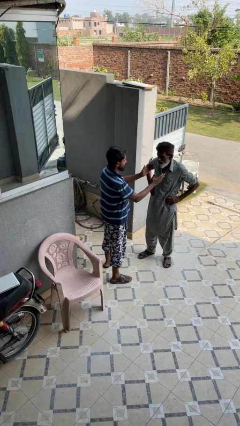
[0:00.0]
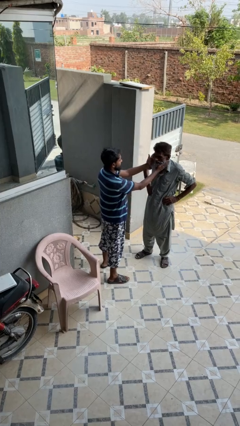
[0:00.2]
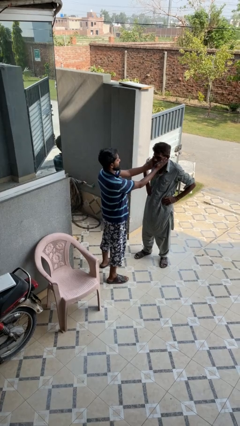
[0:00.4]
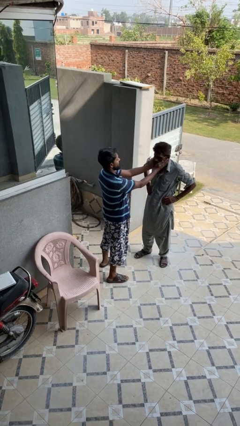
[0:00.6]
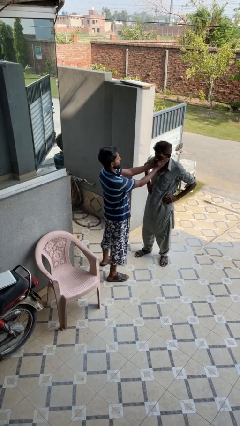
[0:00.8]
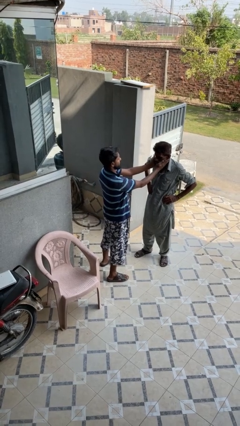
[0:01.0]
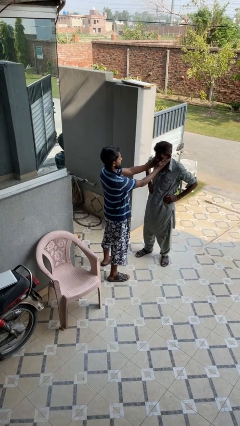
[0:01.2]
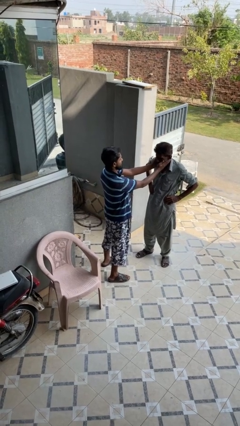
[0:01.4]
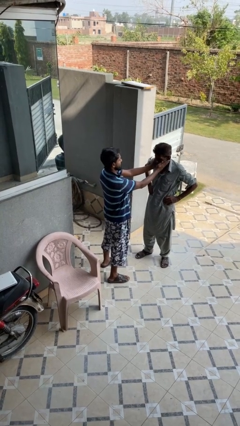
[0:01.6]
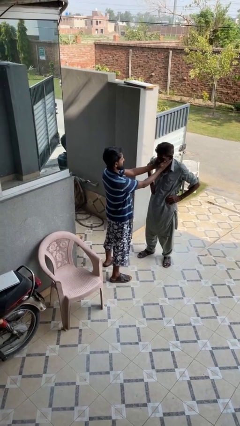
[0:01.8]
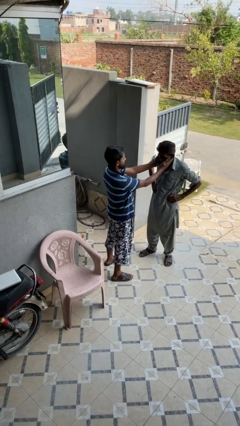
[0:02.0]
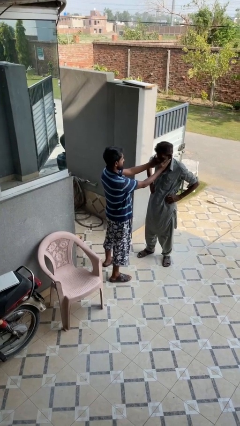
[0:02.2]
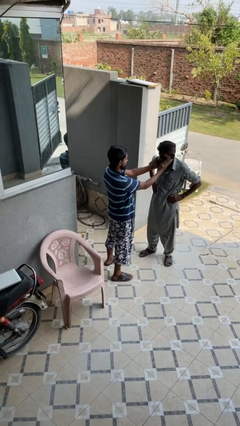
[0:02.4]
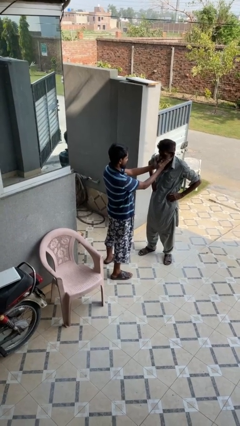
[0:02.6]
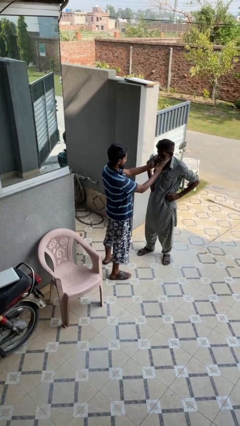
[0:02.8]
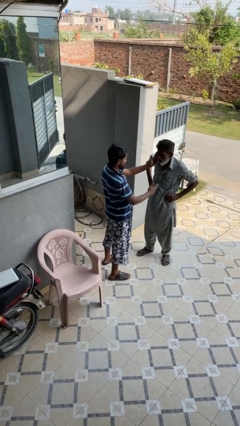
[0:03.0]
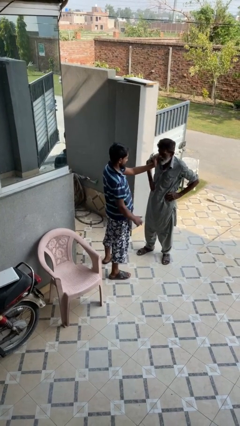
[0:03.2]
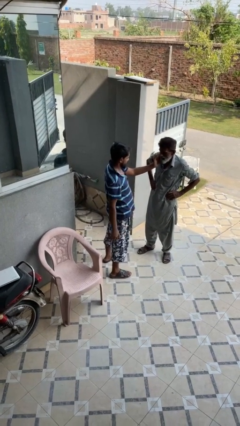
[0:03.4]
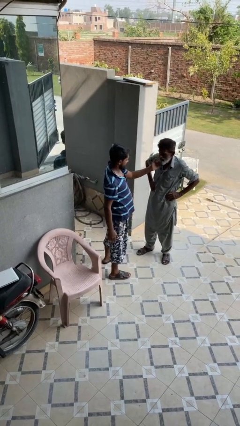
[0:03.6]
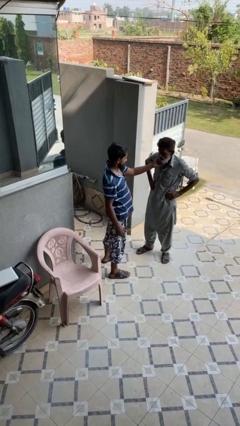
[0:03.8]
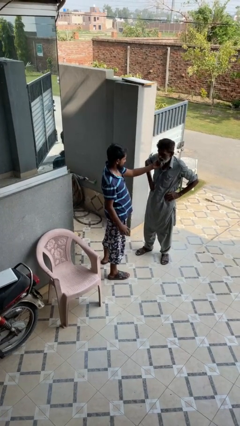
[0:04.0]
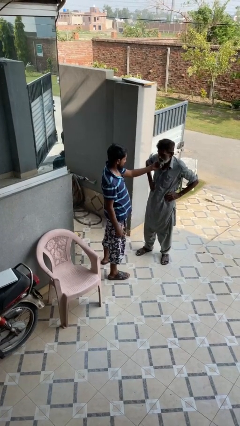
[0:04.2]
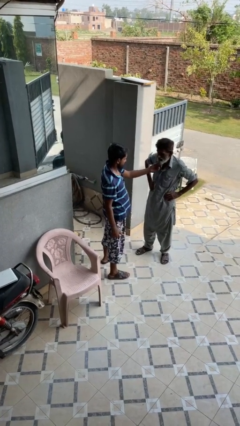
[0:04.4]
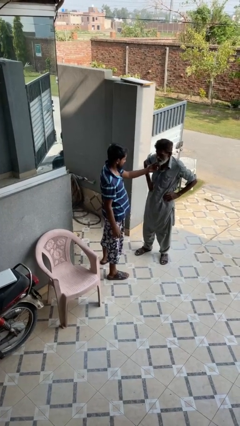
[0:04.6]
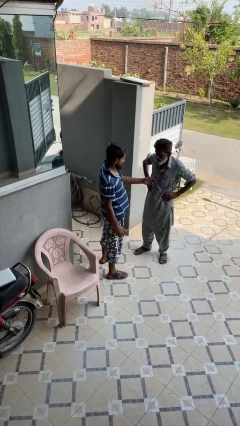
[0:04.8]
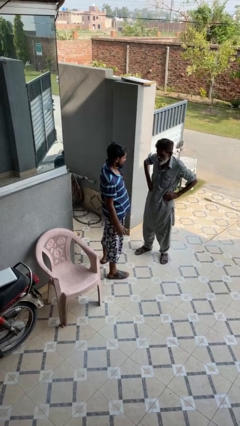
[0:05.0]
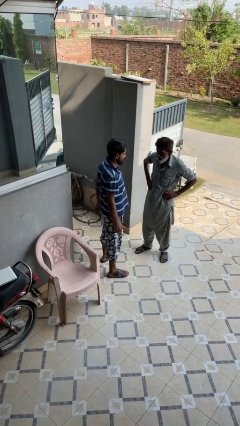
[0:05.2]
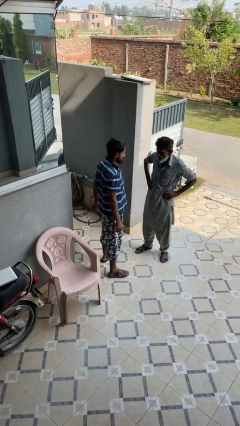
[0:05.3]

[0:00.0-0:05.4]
person touches face of person

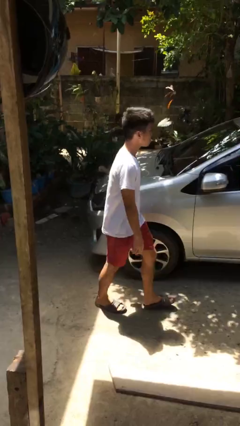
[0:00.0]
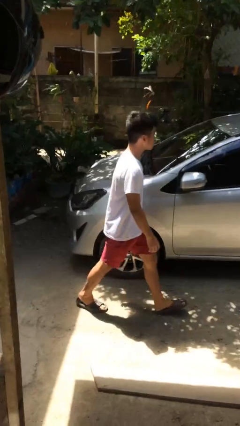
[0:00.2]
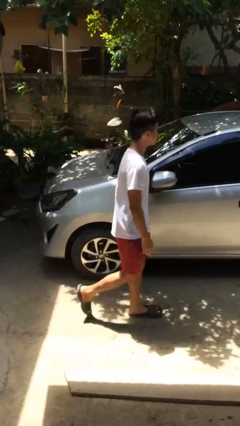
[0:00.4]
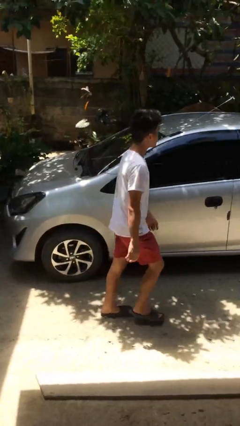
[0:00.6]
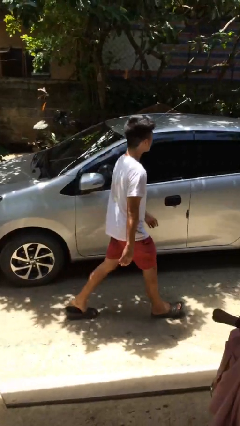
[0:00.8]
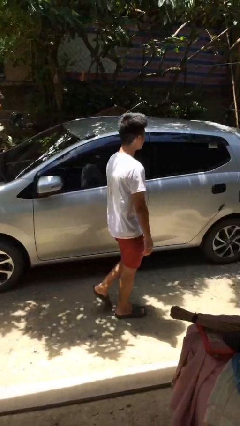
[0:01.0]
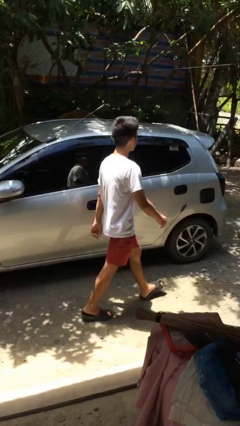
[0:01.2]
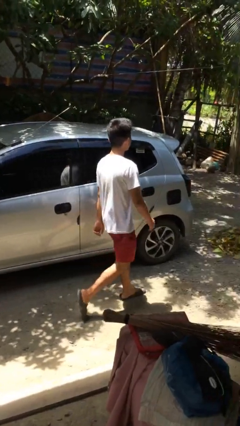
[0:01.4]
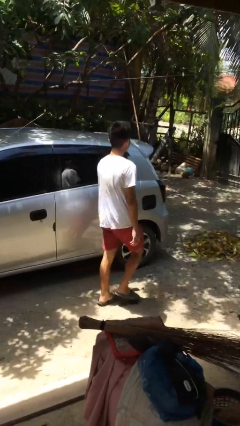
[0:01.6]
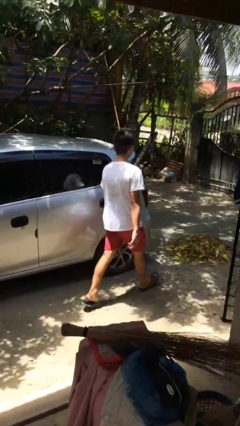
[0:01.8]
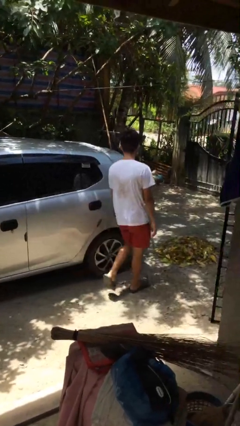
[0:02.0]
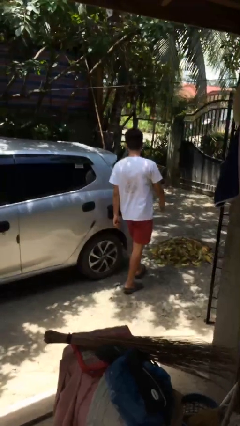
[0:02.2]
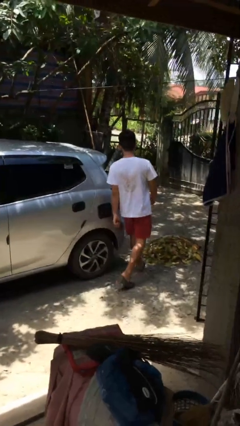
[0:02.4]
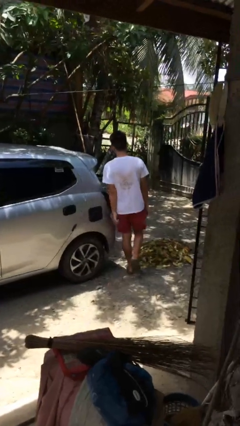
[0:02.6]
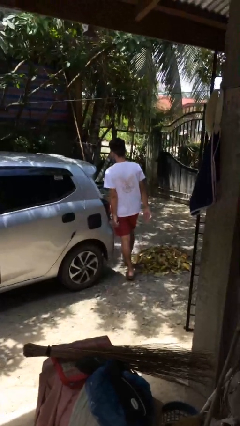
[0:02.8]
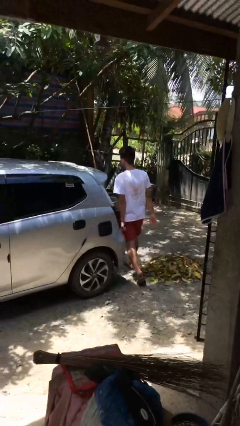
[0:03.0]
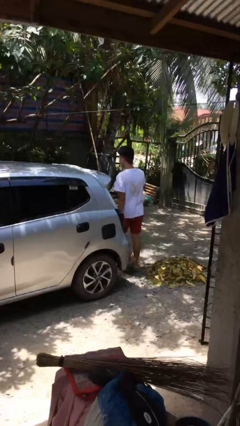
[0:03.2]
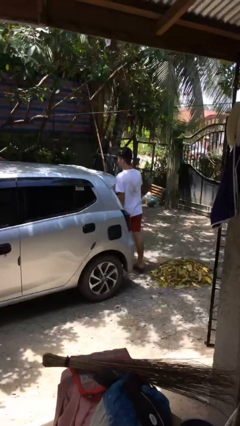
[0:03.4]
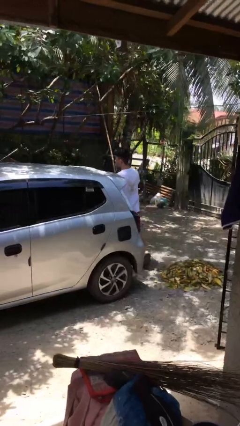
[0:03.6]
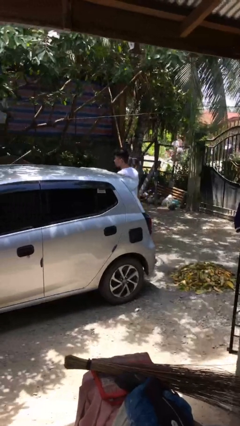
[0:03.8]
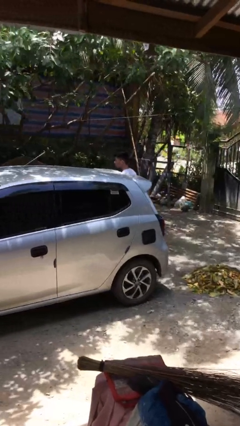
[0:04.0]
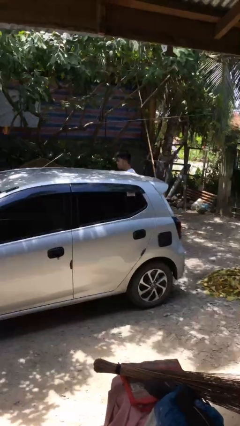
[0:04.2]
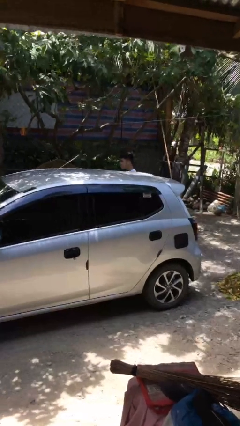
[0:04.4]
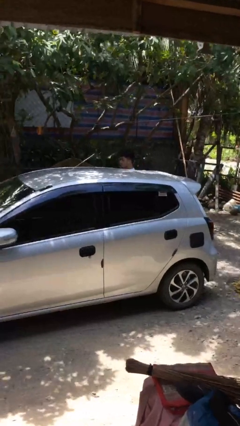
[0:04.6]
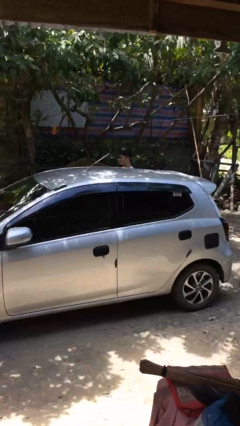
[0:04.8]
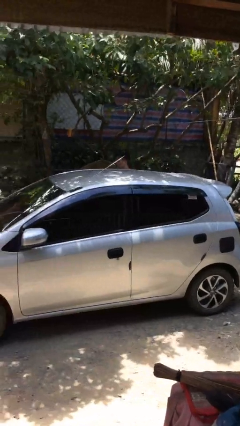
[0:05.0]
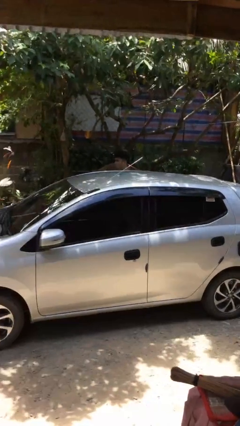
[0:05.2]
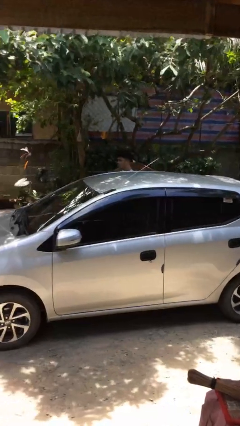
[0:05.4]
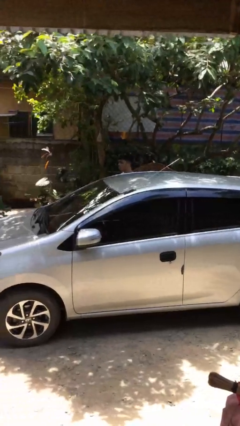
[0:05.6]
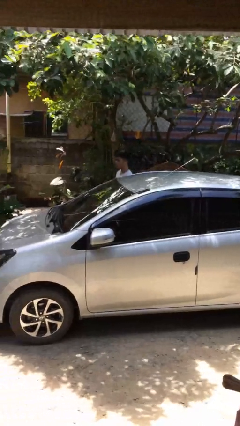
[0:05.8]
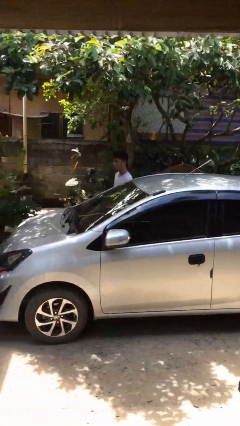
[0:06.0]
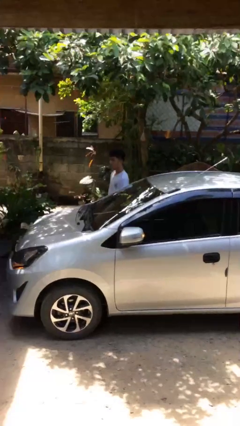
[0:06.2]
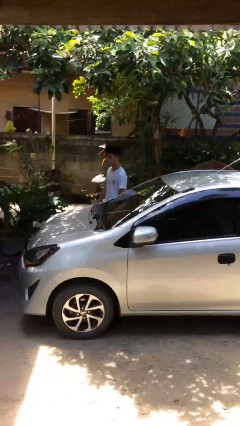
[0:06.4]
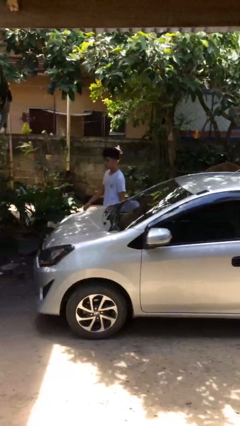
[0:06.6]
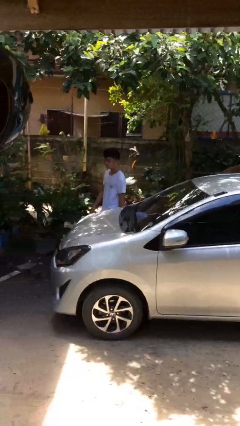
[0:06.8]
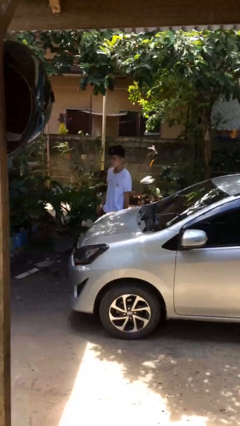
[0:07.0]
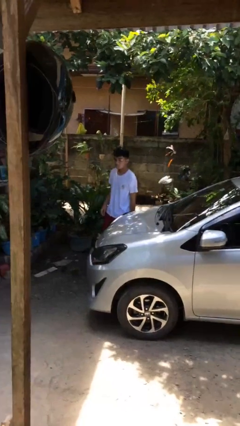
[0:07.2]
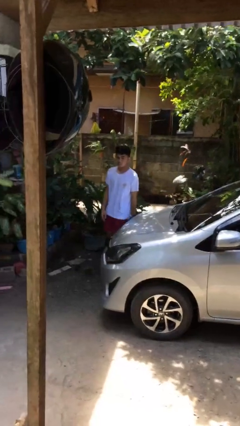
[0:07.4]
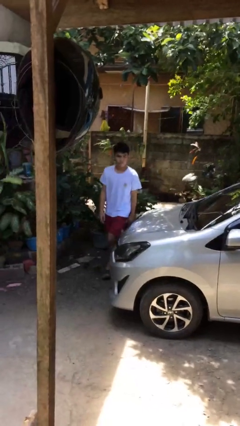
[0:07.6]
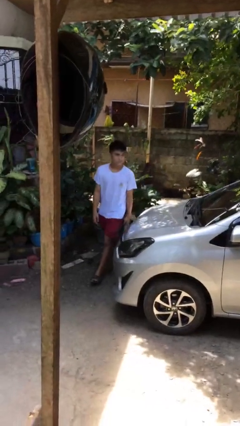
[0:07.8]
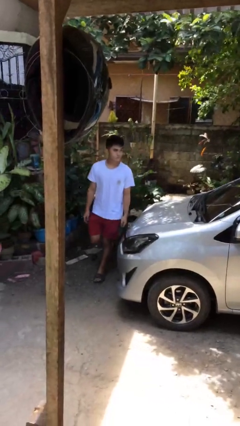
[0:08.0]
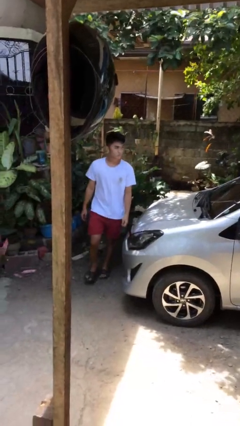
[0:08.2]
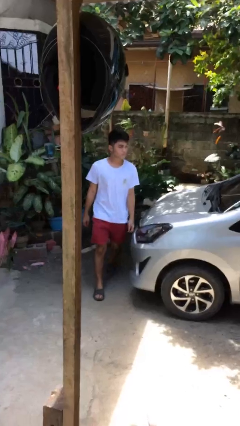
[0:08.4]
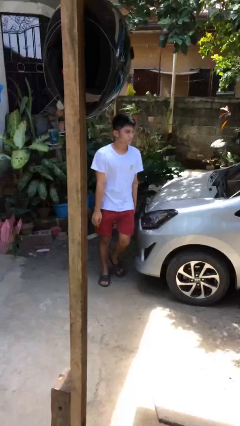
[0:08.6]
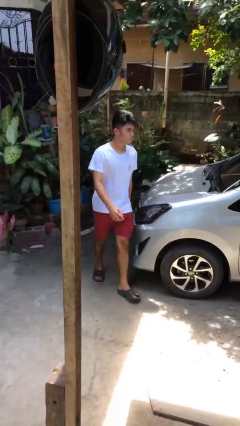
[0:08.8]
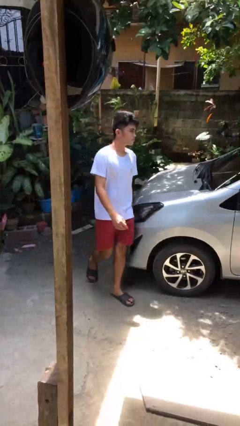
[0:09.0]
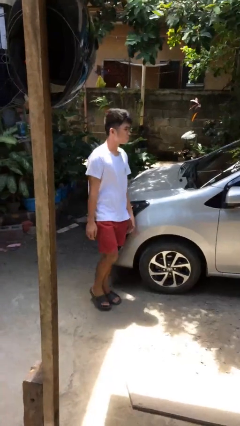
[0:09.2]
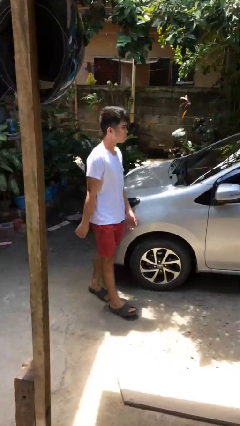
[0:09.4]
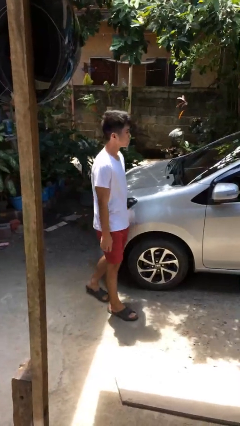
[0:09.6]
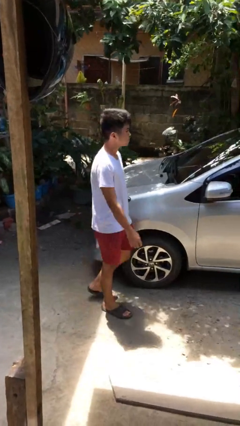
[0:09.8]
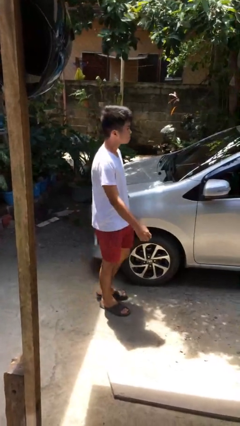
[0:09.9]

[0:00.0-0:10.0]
person walks around car

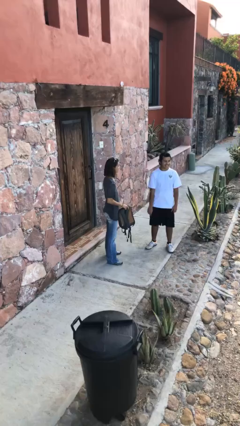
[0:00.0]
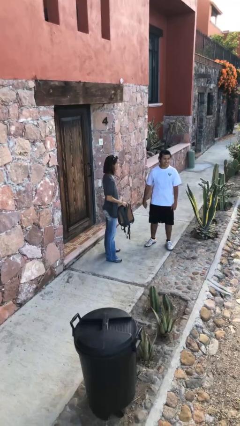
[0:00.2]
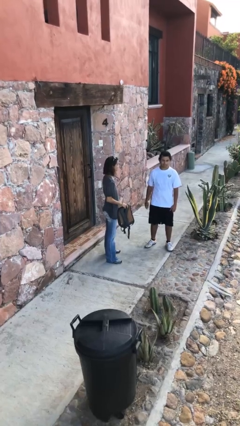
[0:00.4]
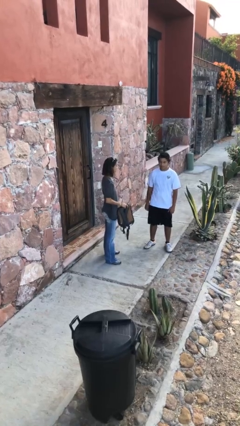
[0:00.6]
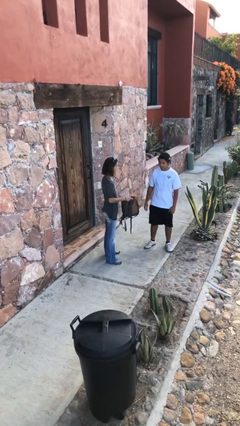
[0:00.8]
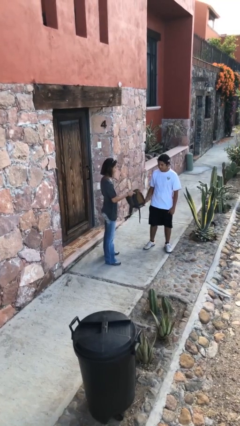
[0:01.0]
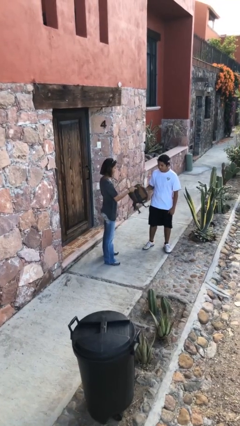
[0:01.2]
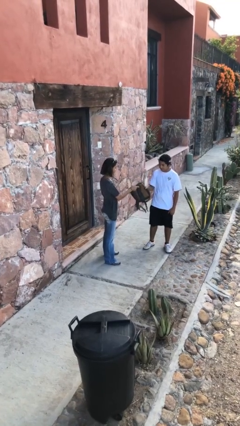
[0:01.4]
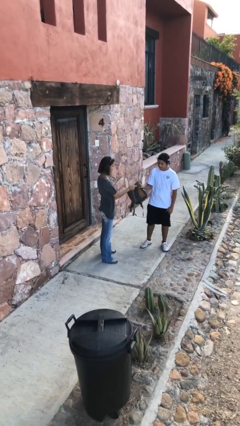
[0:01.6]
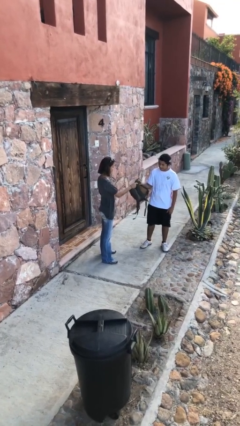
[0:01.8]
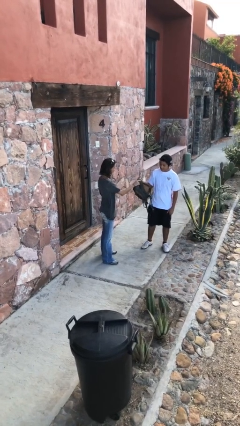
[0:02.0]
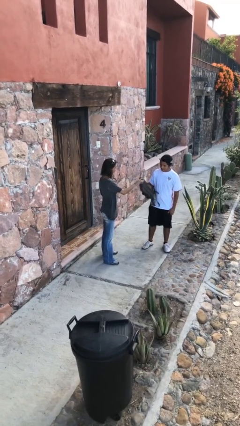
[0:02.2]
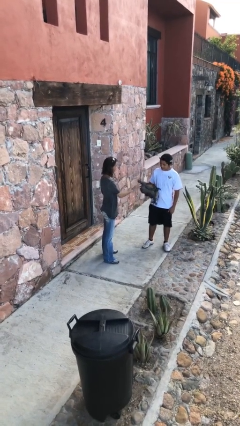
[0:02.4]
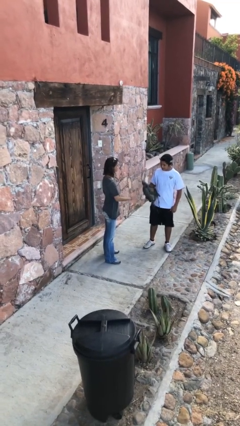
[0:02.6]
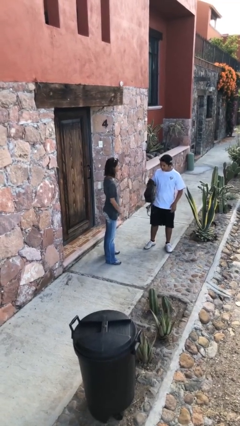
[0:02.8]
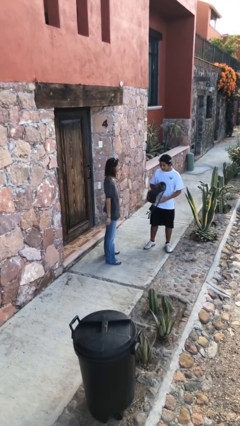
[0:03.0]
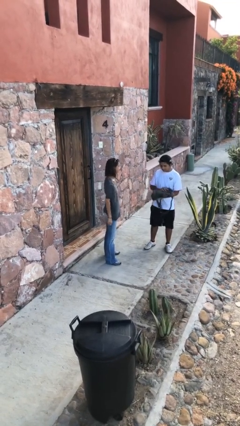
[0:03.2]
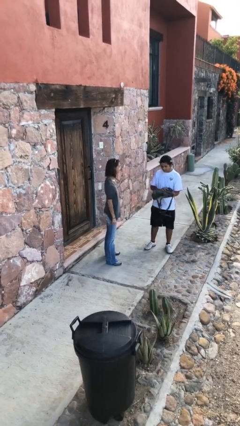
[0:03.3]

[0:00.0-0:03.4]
person transfers object to person
